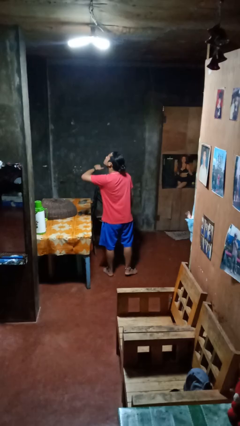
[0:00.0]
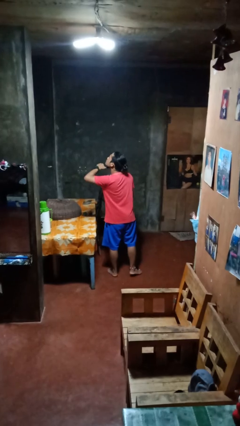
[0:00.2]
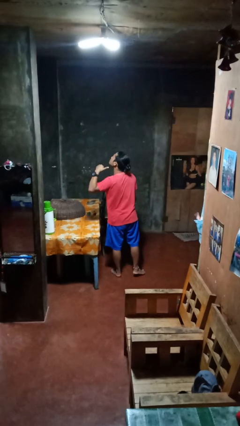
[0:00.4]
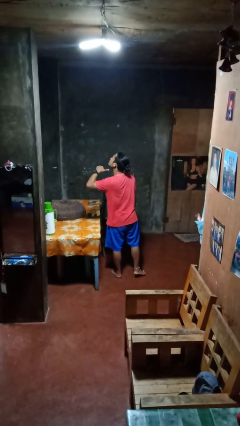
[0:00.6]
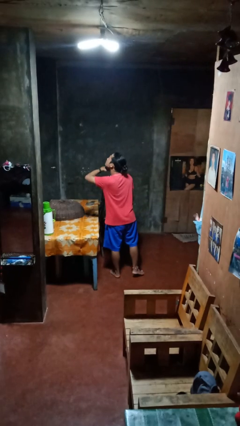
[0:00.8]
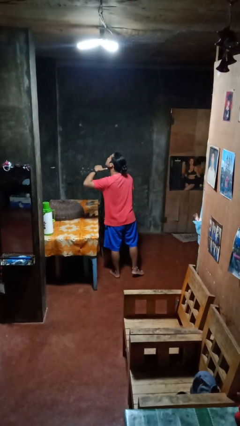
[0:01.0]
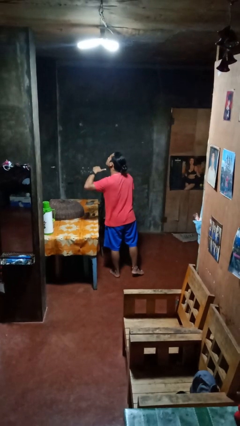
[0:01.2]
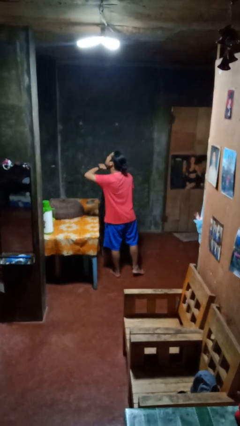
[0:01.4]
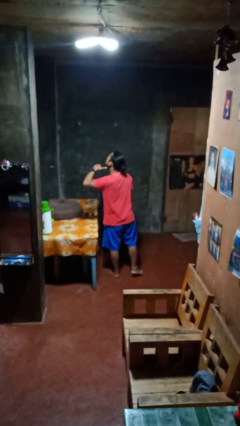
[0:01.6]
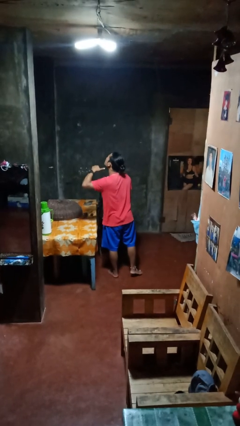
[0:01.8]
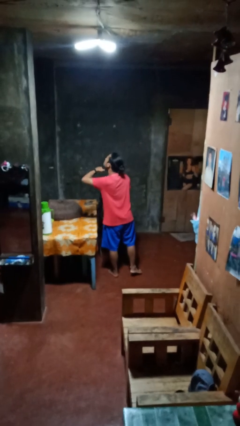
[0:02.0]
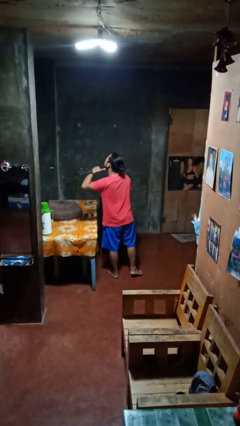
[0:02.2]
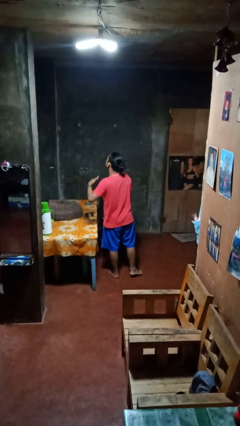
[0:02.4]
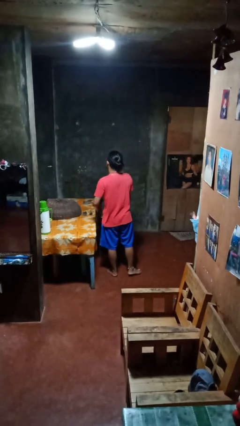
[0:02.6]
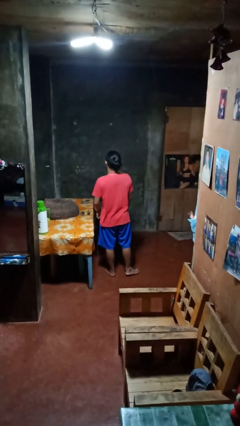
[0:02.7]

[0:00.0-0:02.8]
person gestures cut

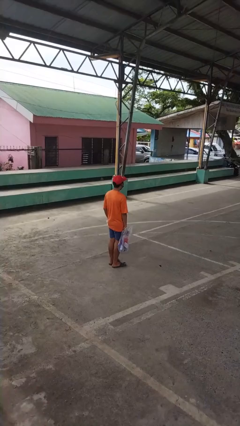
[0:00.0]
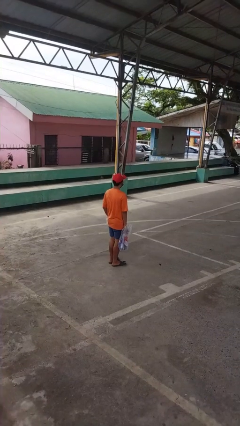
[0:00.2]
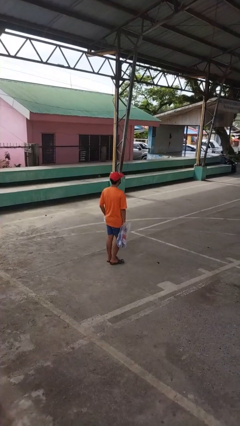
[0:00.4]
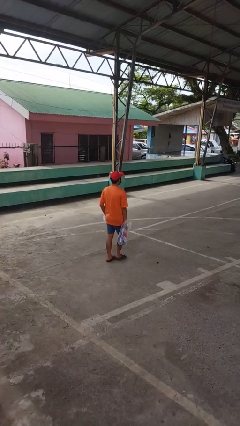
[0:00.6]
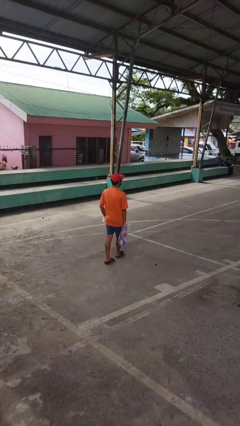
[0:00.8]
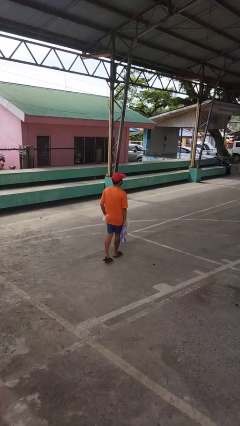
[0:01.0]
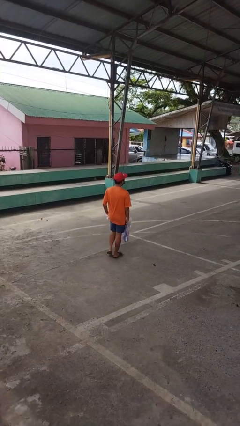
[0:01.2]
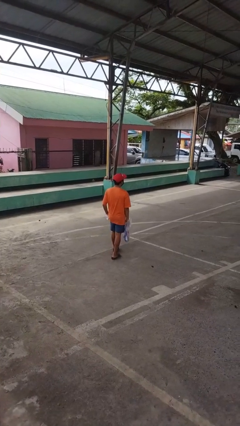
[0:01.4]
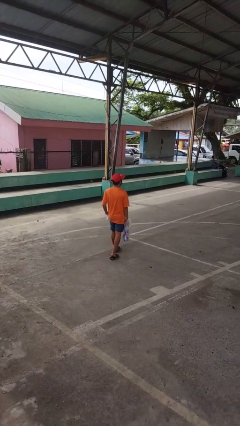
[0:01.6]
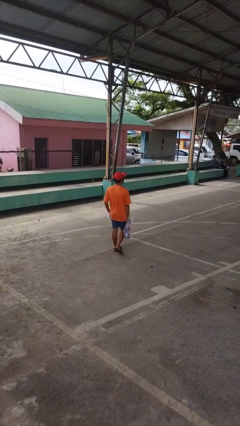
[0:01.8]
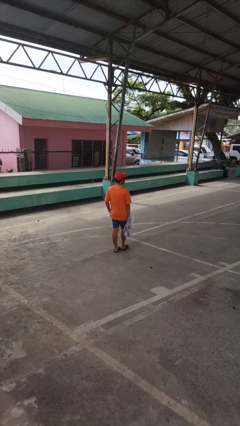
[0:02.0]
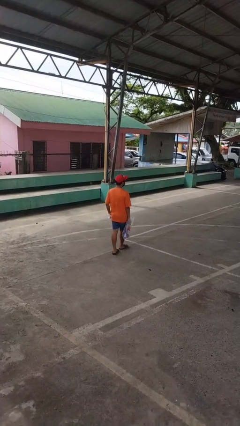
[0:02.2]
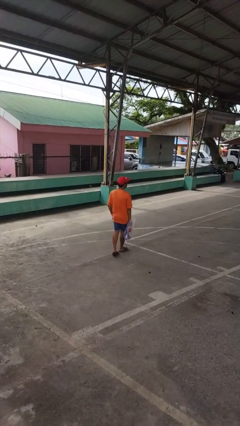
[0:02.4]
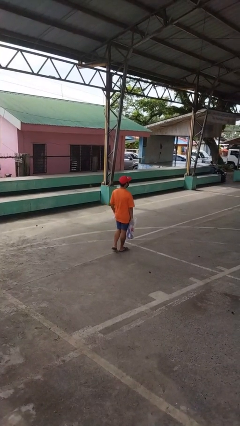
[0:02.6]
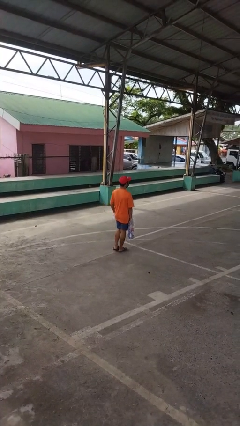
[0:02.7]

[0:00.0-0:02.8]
person carries groceries

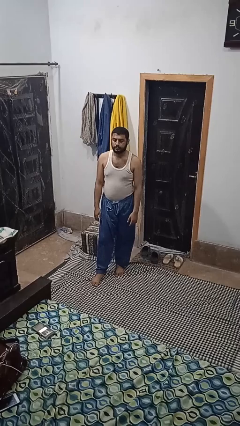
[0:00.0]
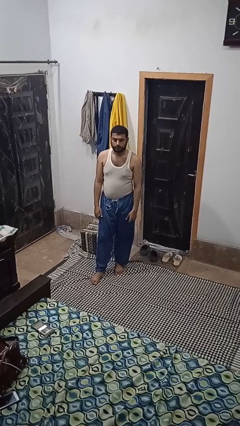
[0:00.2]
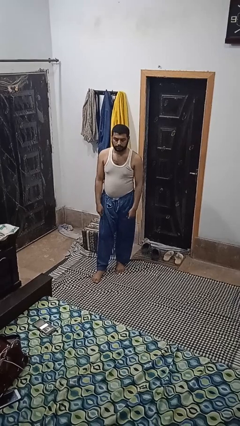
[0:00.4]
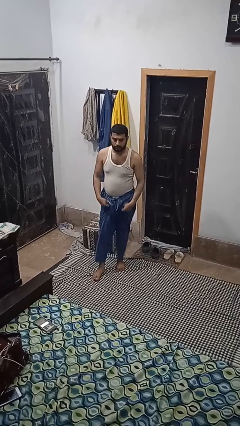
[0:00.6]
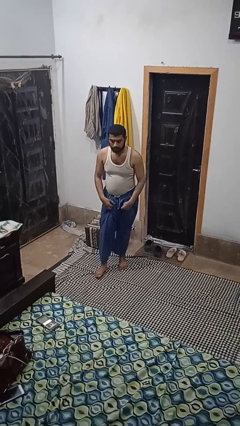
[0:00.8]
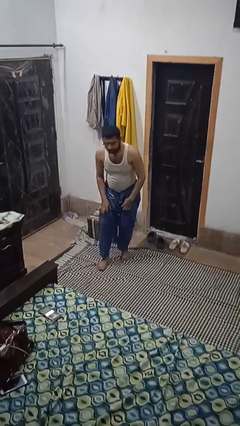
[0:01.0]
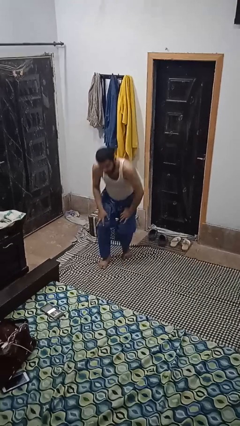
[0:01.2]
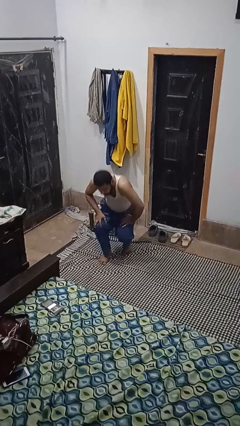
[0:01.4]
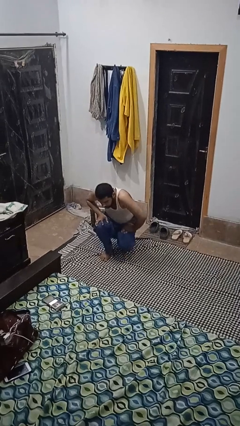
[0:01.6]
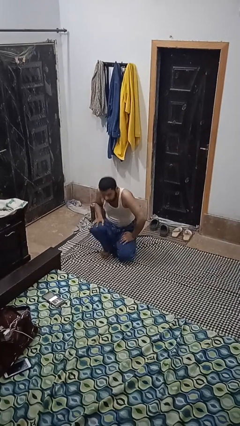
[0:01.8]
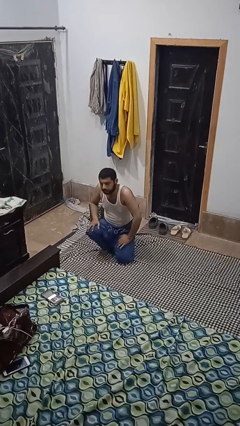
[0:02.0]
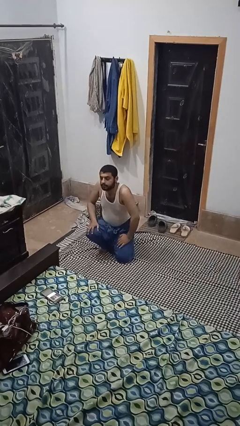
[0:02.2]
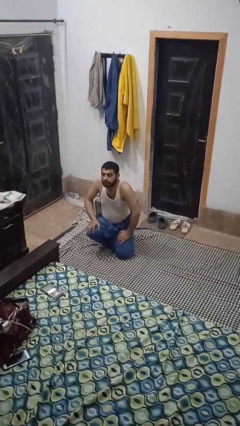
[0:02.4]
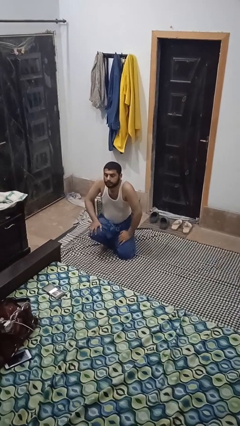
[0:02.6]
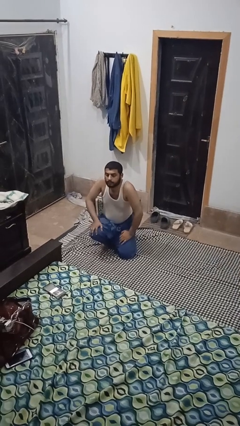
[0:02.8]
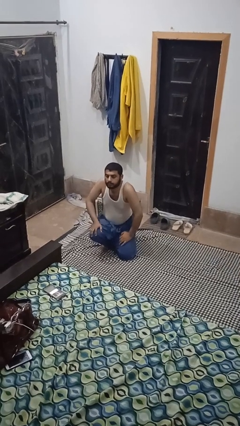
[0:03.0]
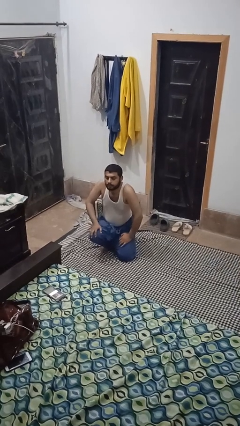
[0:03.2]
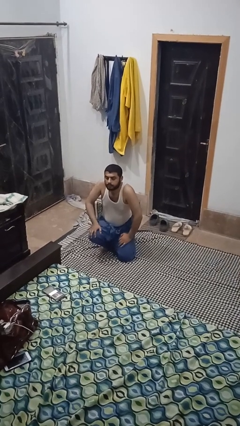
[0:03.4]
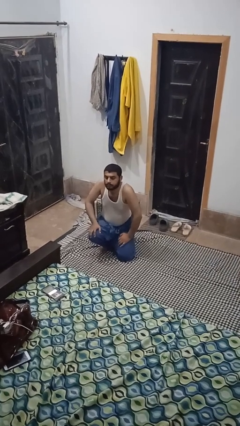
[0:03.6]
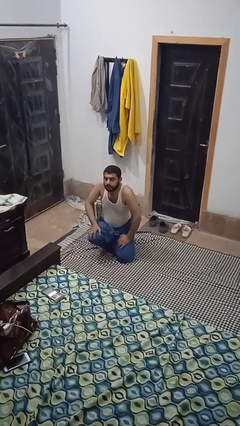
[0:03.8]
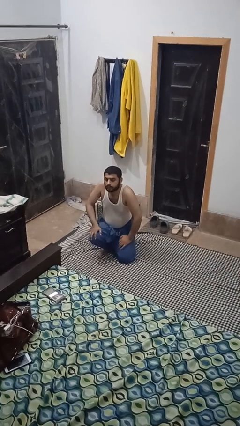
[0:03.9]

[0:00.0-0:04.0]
person kneels

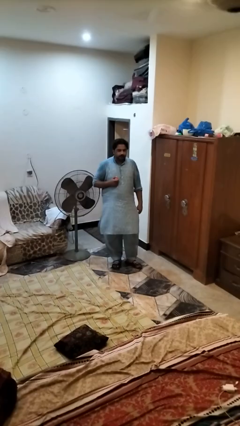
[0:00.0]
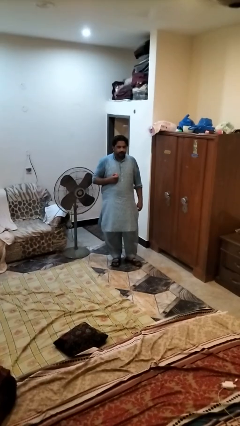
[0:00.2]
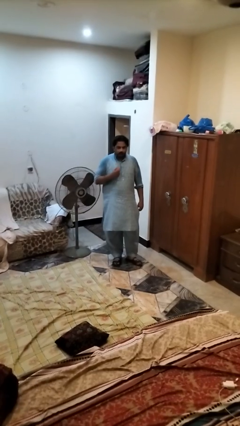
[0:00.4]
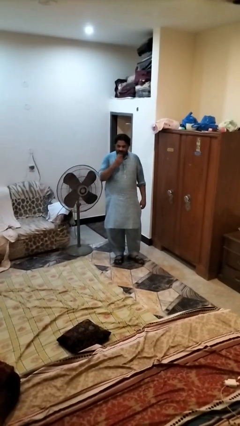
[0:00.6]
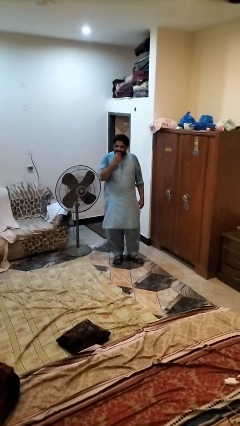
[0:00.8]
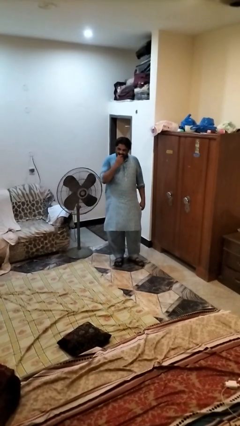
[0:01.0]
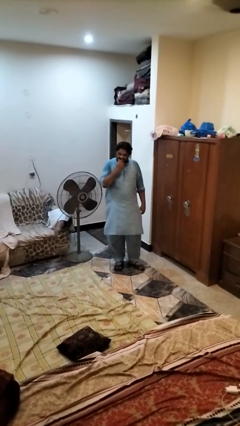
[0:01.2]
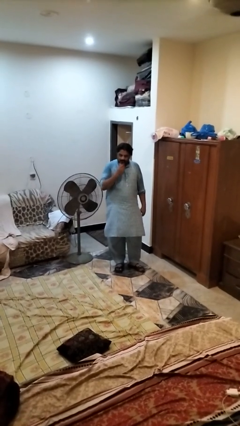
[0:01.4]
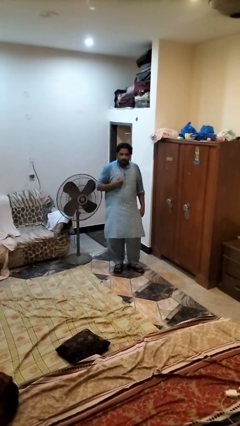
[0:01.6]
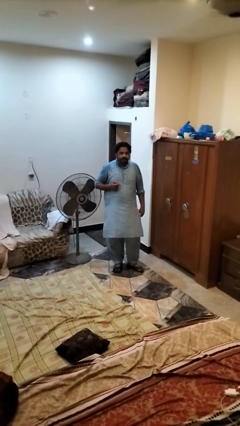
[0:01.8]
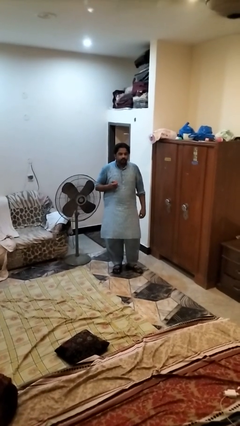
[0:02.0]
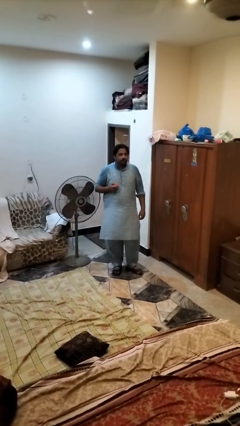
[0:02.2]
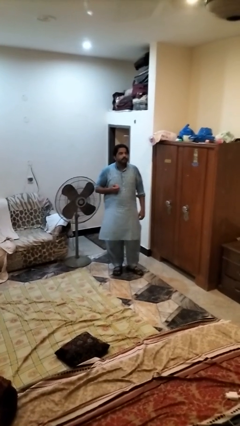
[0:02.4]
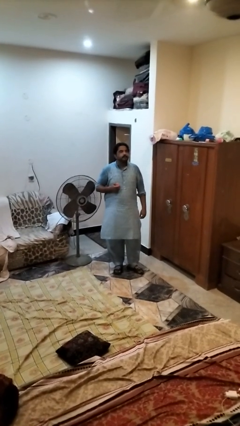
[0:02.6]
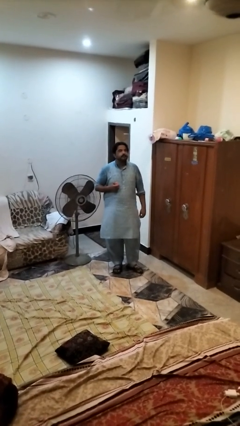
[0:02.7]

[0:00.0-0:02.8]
person eats apple

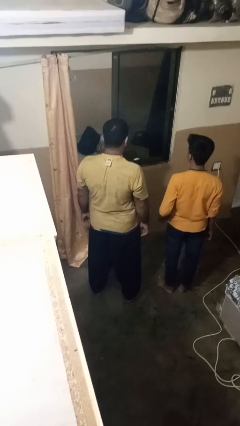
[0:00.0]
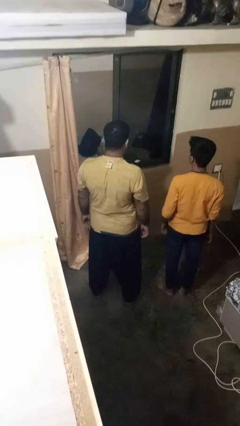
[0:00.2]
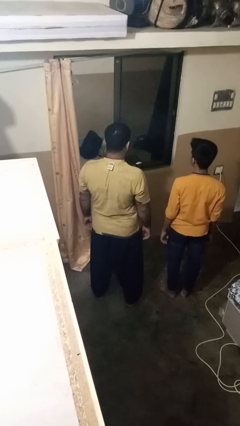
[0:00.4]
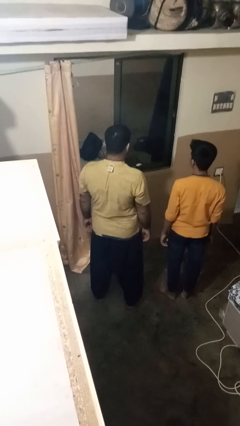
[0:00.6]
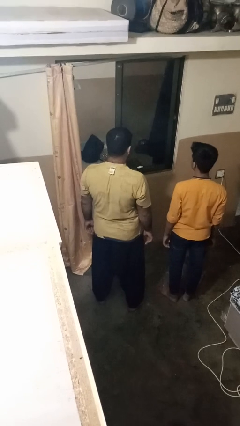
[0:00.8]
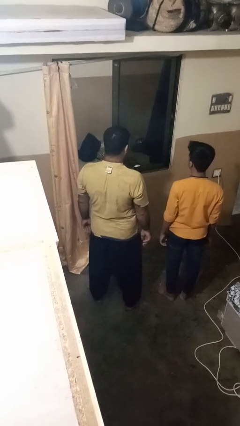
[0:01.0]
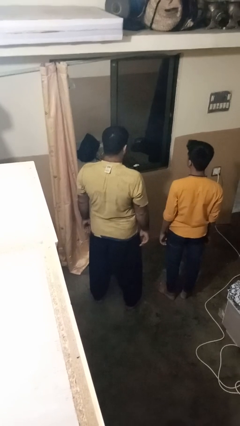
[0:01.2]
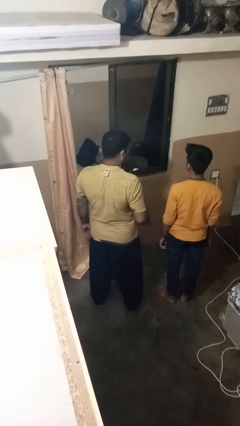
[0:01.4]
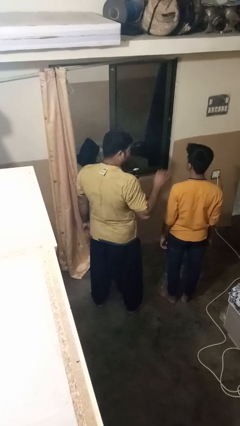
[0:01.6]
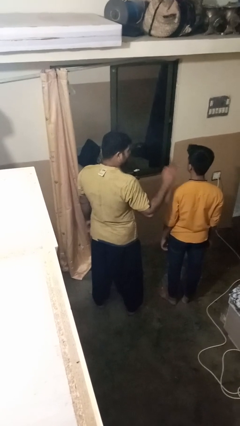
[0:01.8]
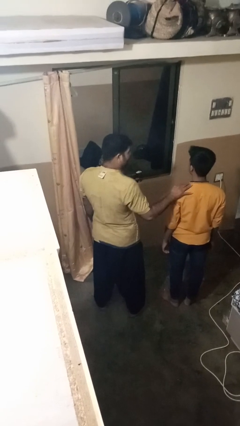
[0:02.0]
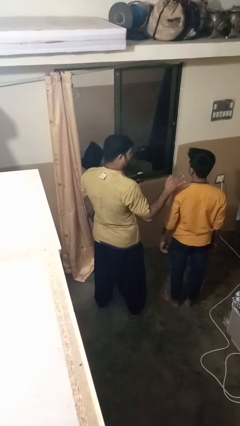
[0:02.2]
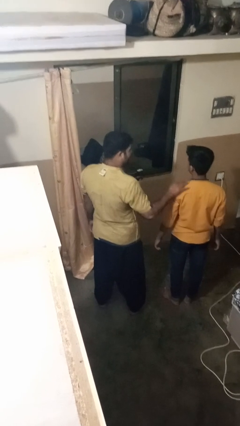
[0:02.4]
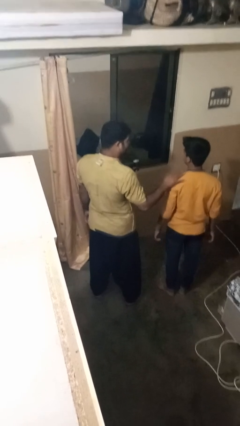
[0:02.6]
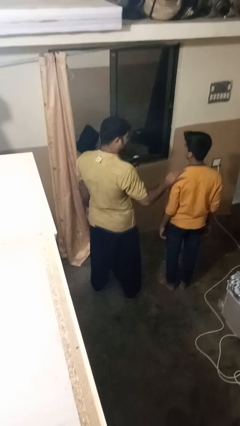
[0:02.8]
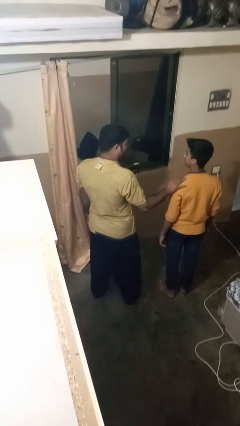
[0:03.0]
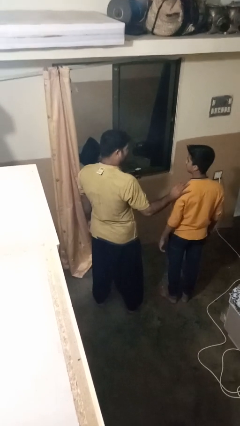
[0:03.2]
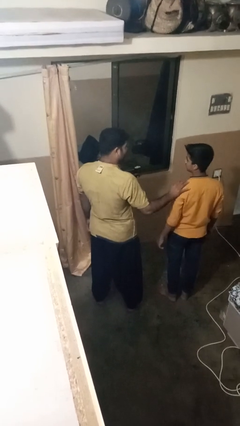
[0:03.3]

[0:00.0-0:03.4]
person pounds shoulders of person

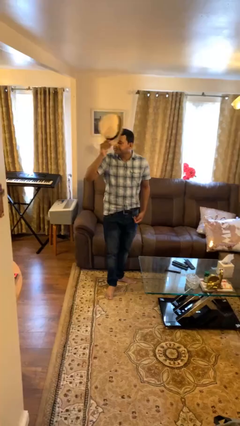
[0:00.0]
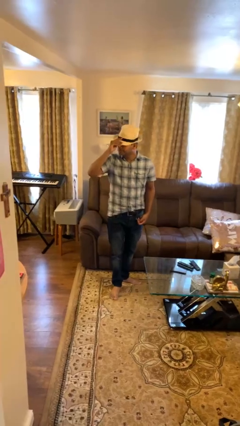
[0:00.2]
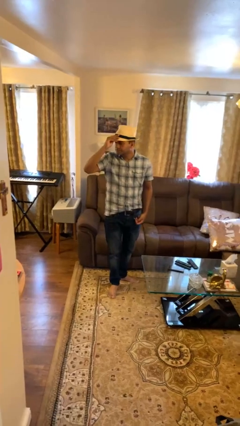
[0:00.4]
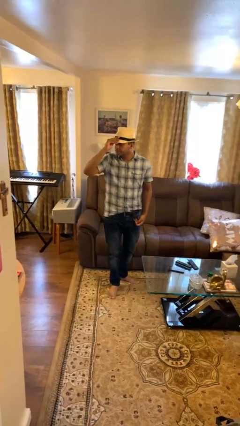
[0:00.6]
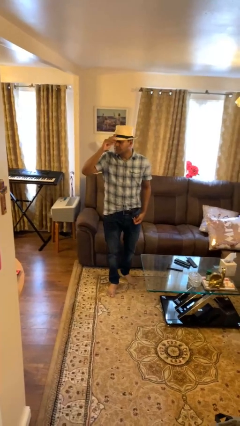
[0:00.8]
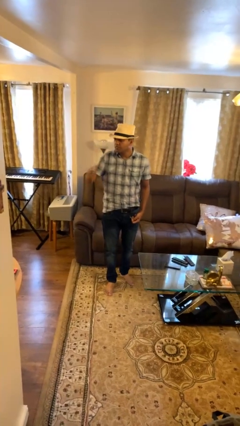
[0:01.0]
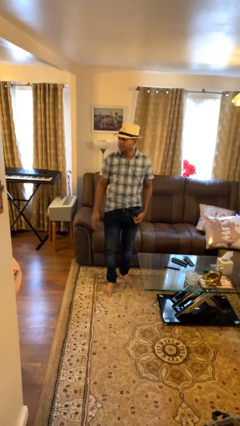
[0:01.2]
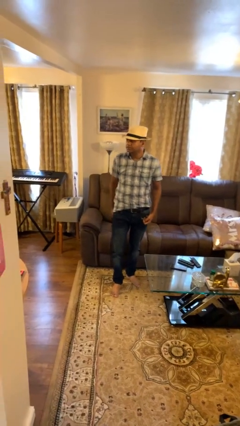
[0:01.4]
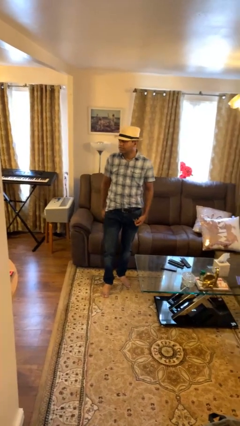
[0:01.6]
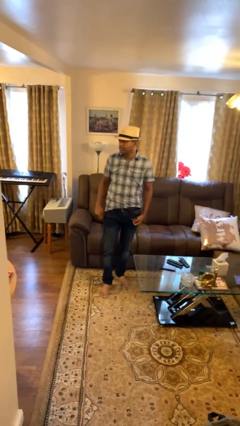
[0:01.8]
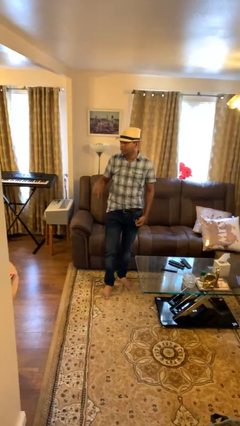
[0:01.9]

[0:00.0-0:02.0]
person puts on hat
